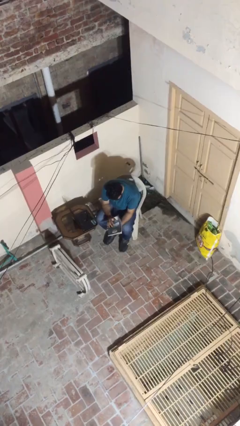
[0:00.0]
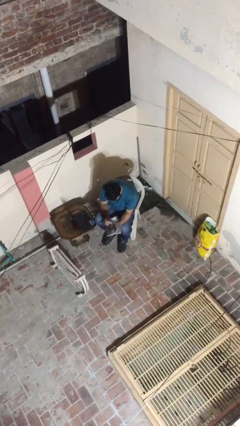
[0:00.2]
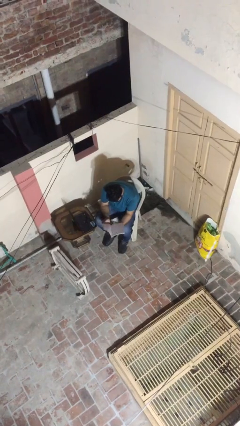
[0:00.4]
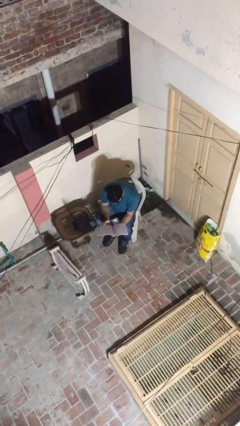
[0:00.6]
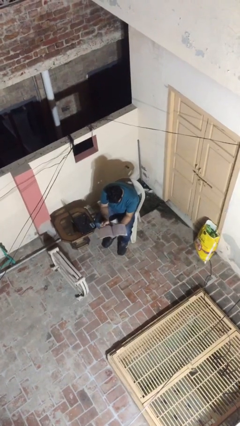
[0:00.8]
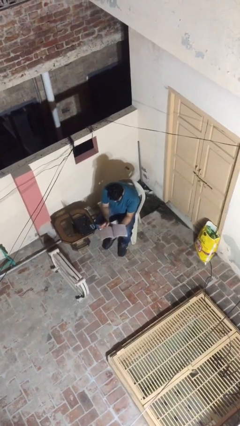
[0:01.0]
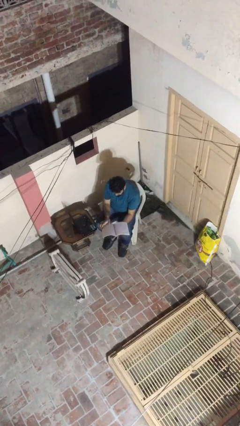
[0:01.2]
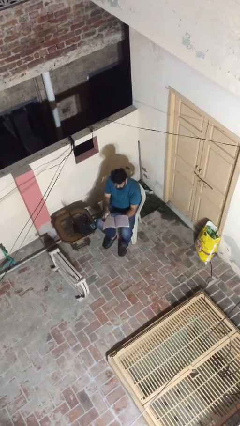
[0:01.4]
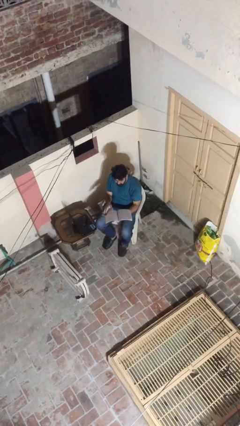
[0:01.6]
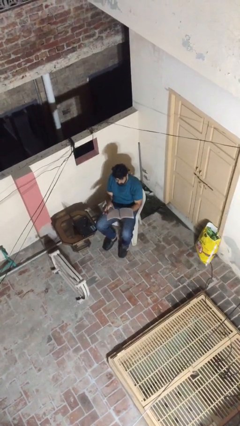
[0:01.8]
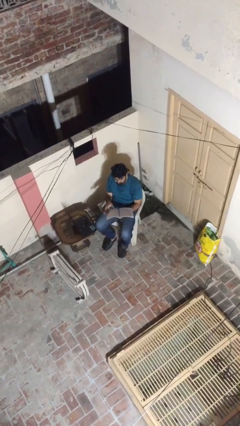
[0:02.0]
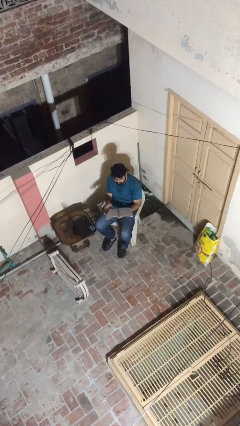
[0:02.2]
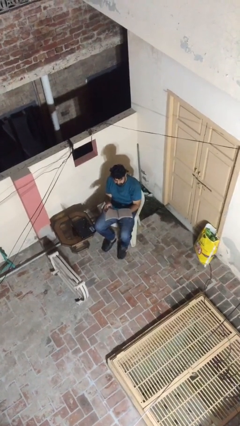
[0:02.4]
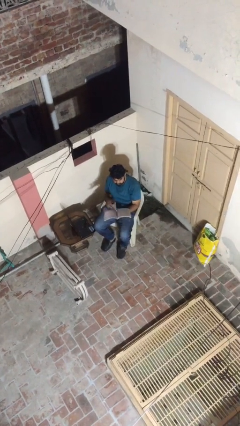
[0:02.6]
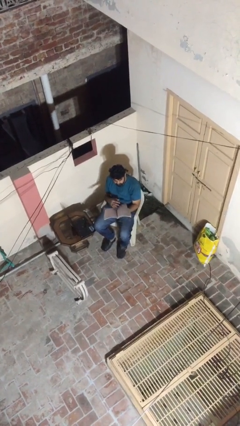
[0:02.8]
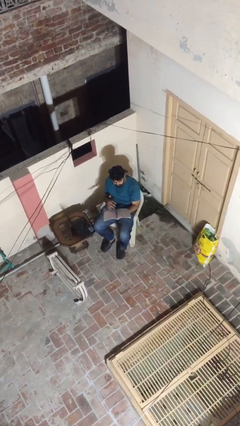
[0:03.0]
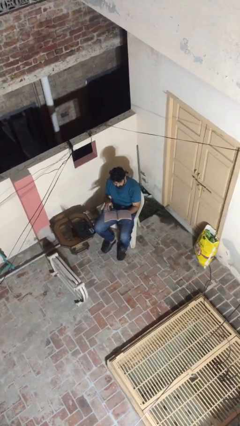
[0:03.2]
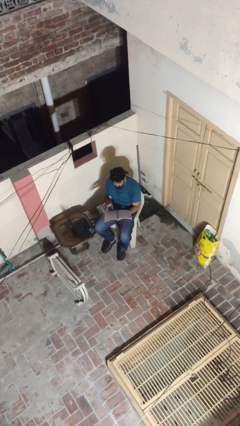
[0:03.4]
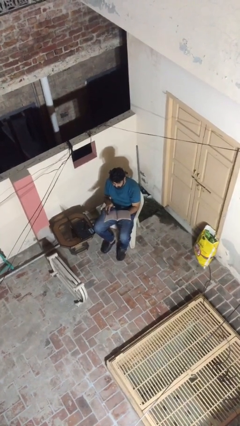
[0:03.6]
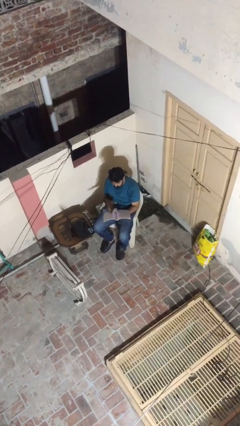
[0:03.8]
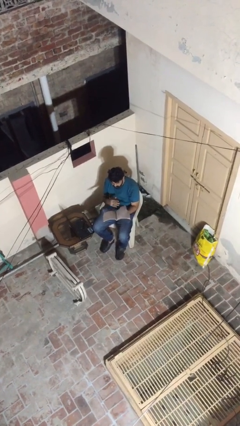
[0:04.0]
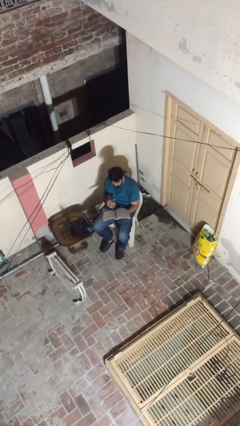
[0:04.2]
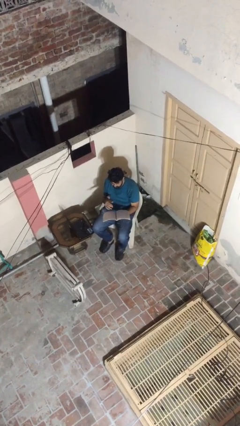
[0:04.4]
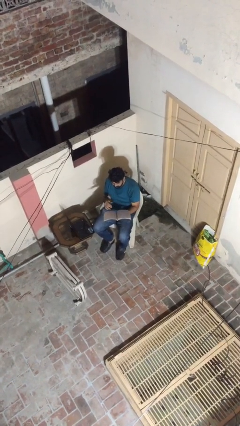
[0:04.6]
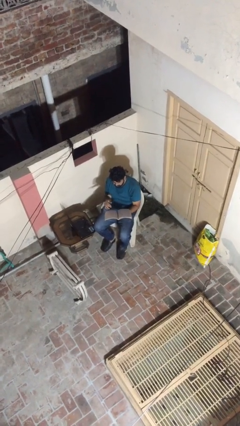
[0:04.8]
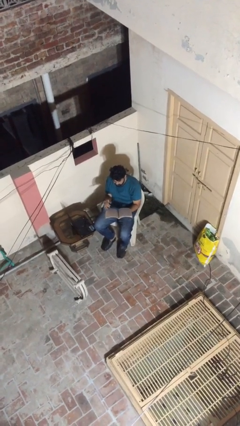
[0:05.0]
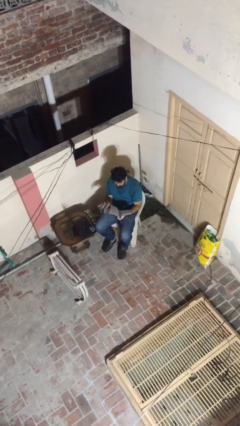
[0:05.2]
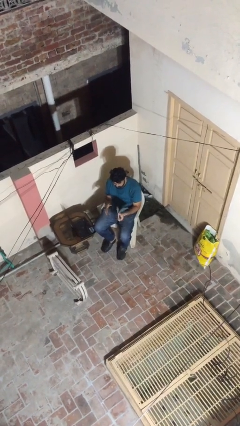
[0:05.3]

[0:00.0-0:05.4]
person reads document

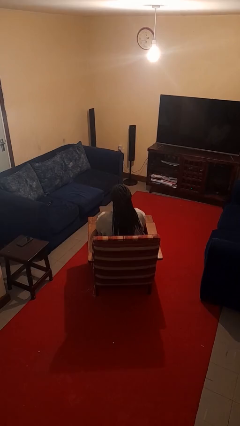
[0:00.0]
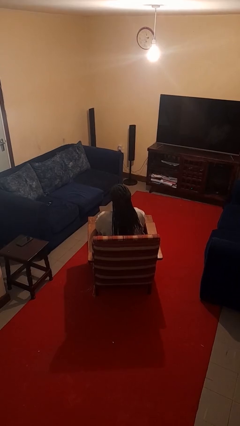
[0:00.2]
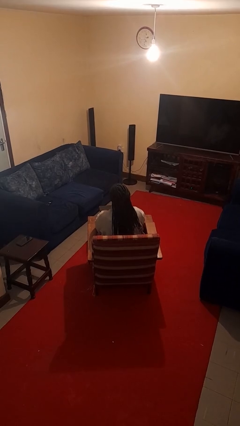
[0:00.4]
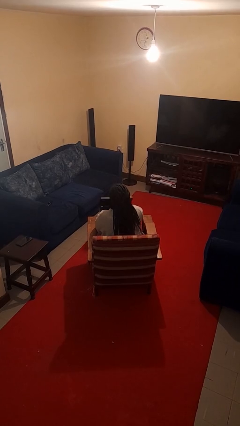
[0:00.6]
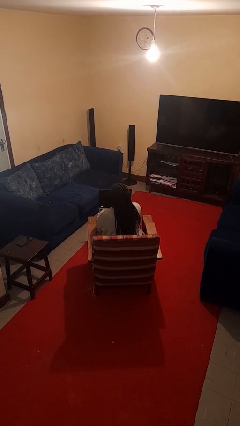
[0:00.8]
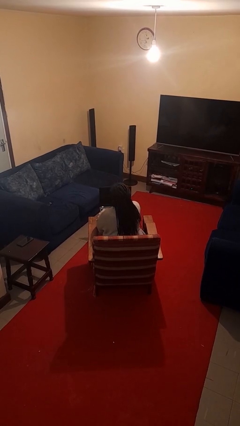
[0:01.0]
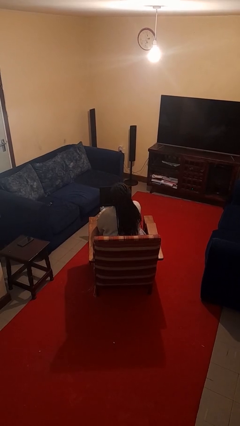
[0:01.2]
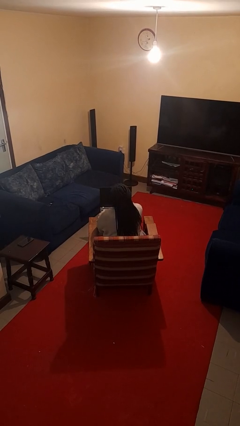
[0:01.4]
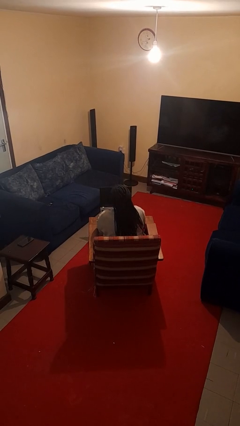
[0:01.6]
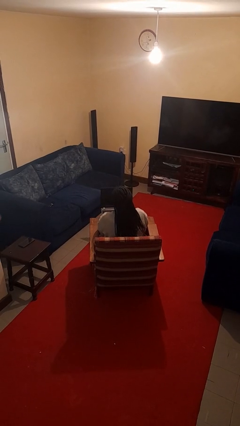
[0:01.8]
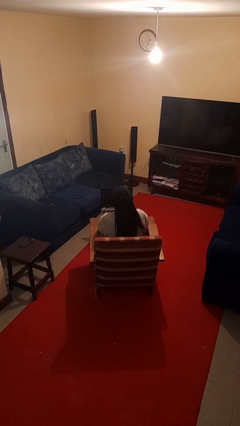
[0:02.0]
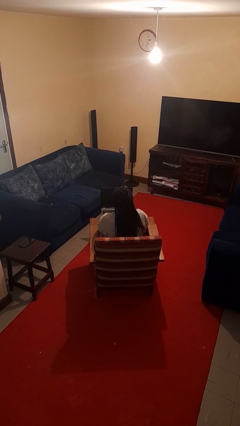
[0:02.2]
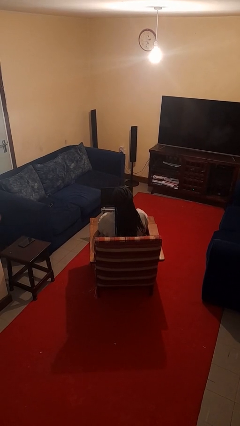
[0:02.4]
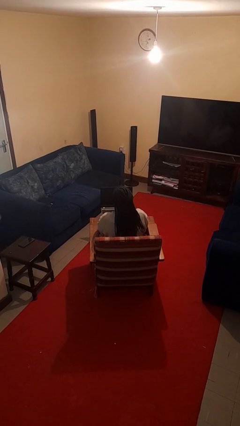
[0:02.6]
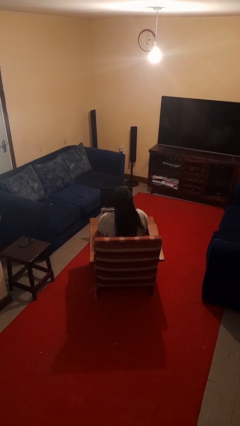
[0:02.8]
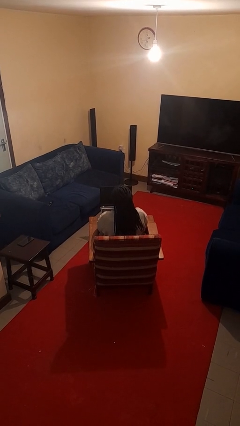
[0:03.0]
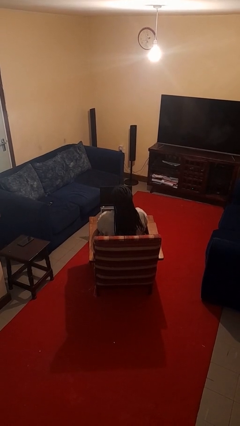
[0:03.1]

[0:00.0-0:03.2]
person opens laptop

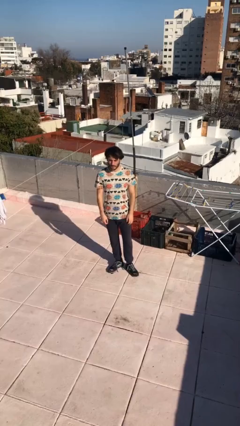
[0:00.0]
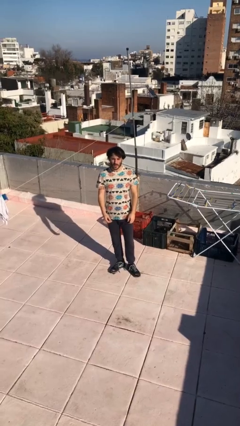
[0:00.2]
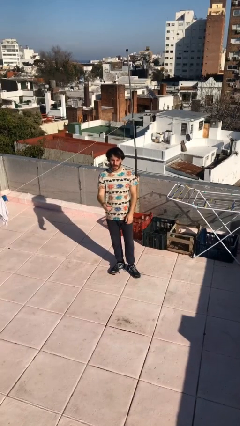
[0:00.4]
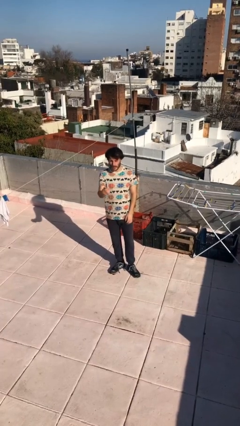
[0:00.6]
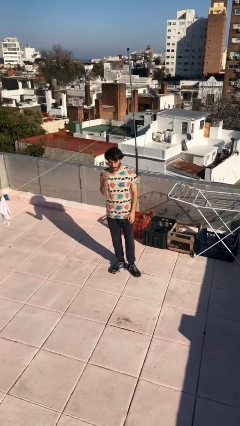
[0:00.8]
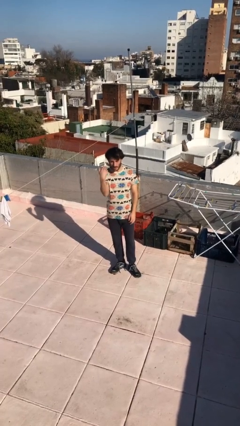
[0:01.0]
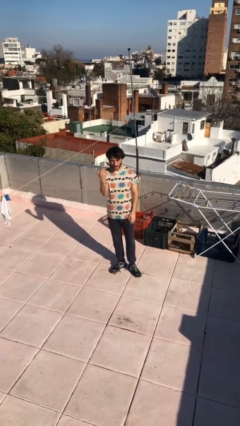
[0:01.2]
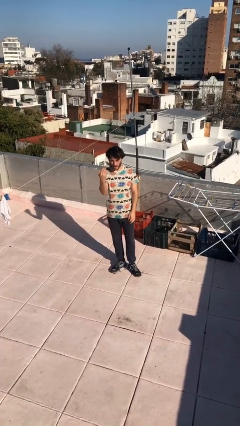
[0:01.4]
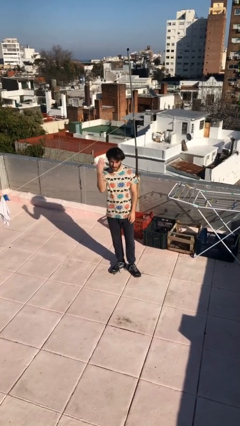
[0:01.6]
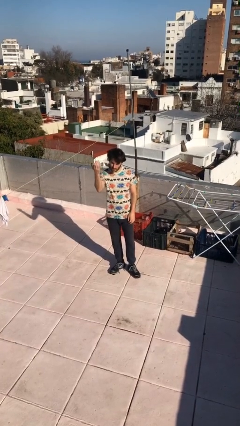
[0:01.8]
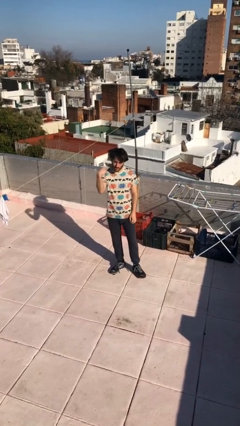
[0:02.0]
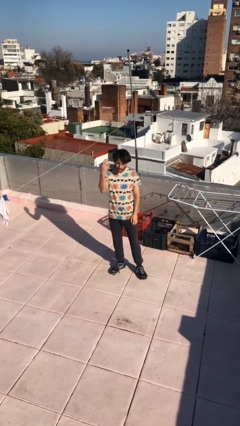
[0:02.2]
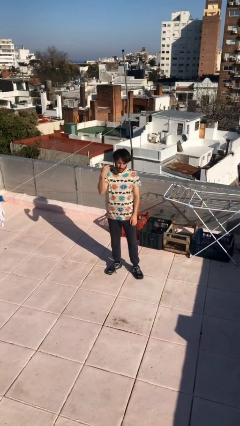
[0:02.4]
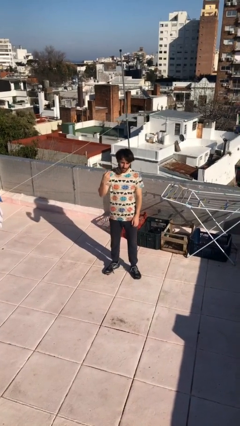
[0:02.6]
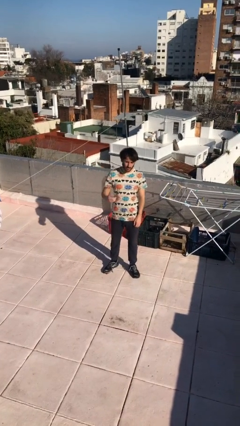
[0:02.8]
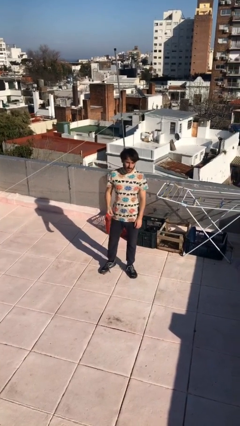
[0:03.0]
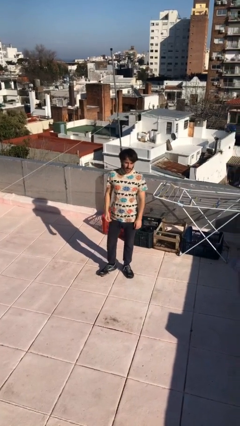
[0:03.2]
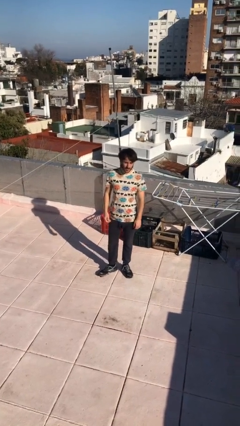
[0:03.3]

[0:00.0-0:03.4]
person gestures come here

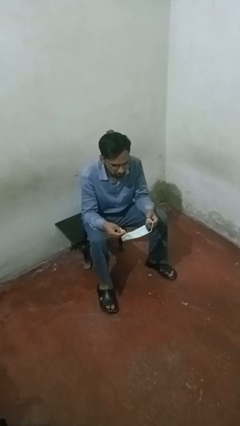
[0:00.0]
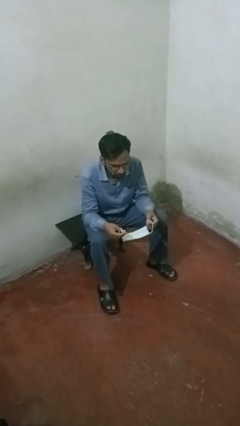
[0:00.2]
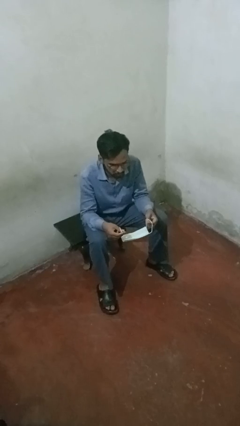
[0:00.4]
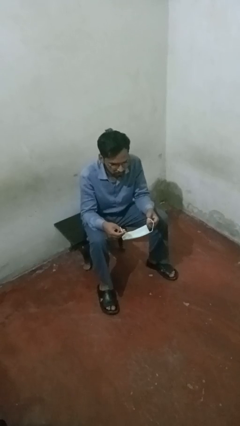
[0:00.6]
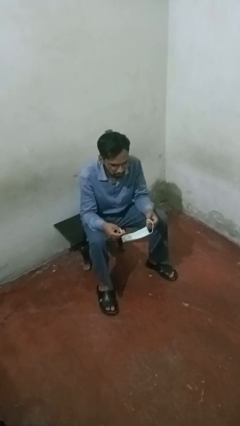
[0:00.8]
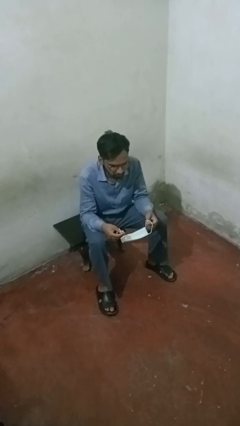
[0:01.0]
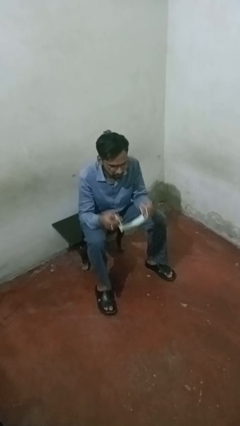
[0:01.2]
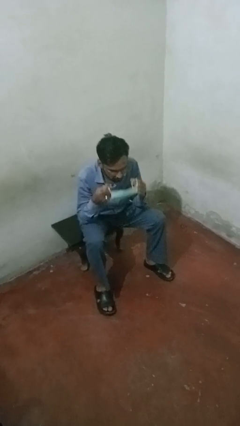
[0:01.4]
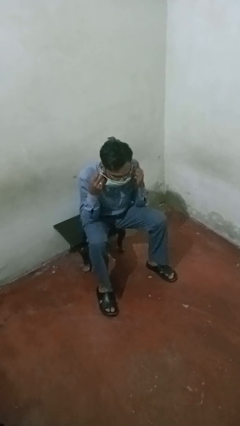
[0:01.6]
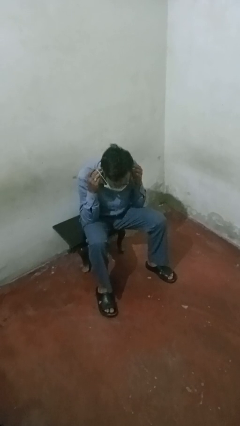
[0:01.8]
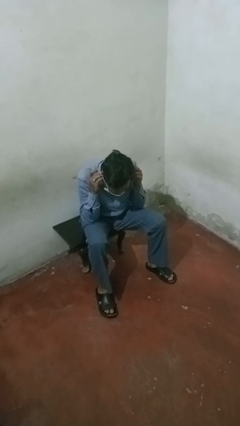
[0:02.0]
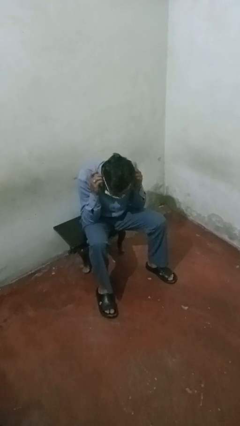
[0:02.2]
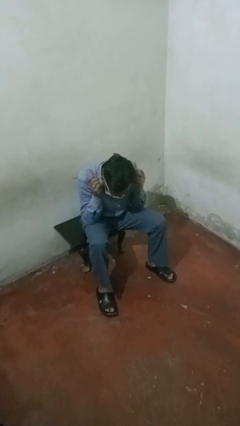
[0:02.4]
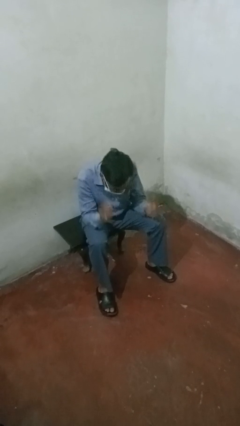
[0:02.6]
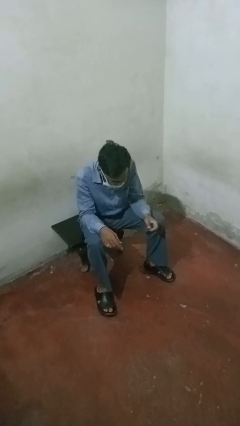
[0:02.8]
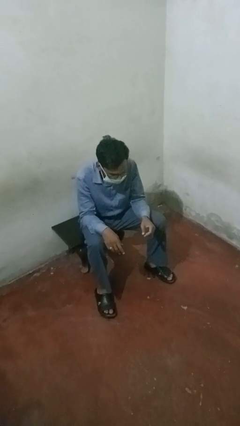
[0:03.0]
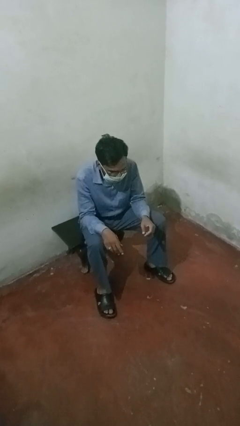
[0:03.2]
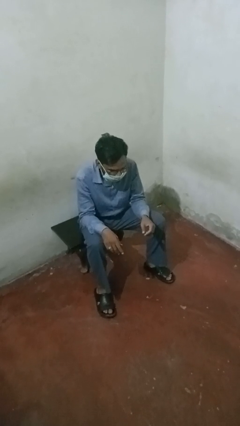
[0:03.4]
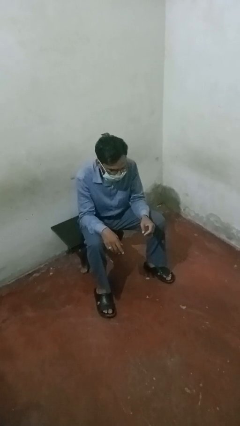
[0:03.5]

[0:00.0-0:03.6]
person puts on facemask

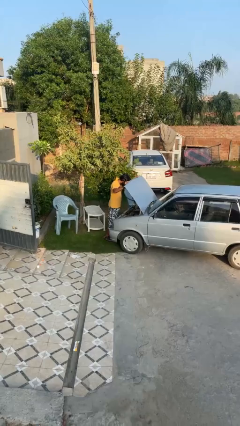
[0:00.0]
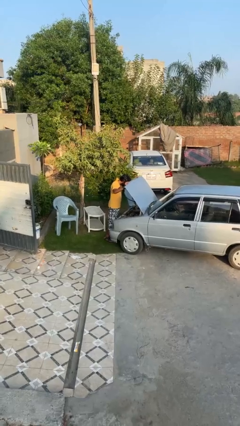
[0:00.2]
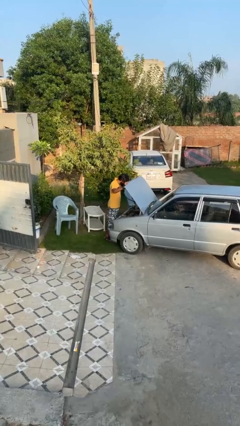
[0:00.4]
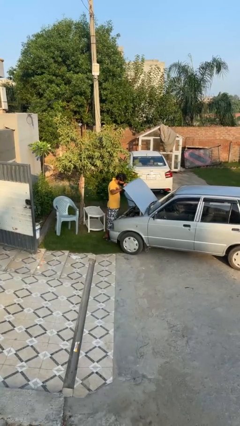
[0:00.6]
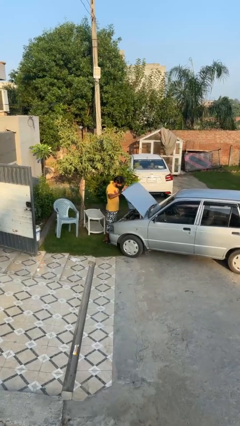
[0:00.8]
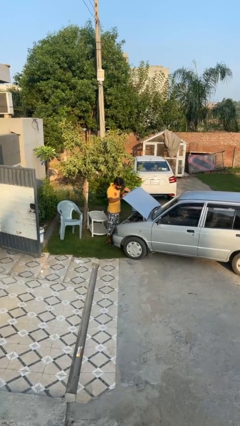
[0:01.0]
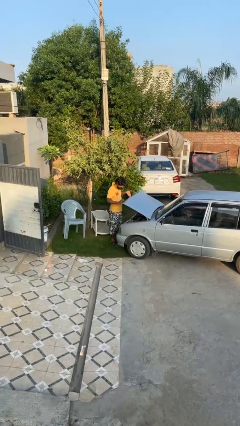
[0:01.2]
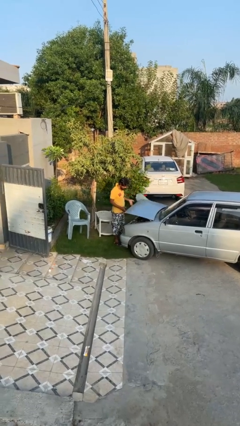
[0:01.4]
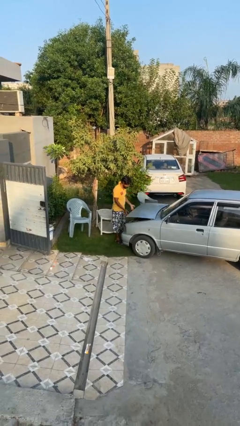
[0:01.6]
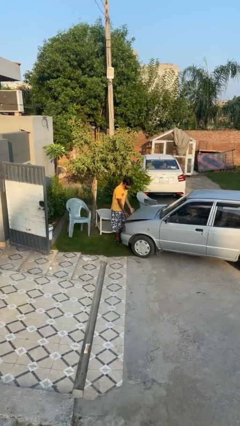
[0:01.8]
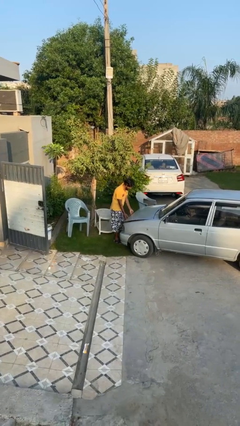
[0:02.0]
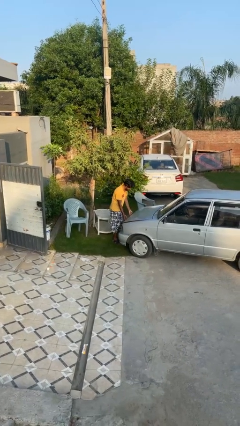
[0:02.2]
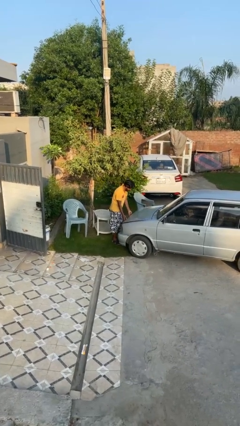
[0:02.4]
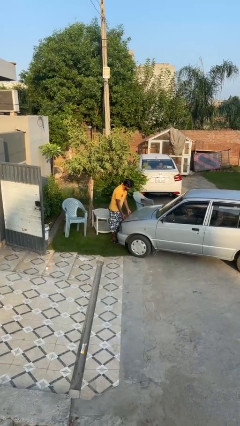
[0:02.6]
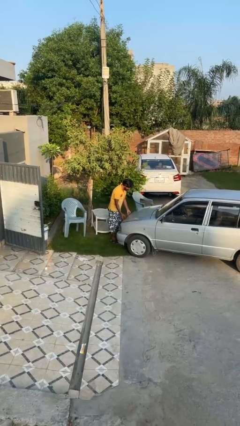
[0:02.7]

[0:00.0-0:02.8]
person closes car hood
